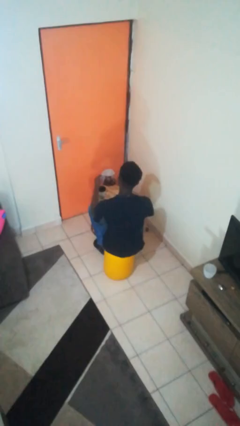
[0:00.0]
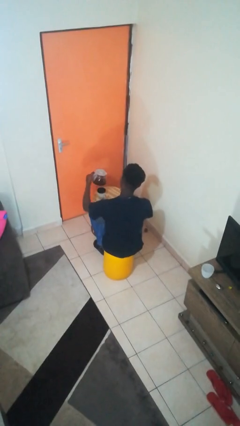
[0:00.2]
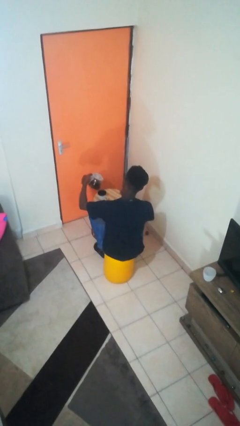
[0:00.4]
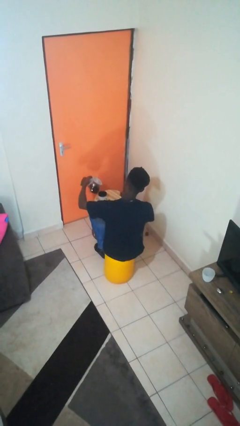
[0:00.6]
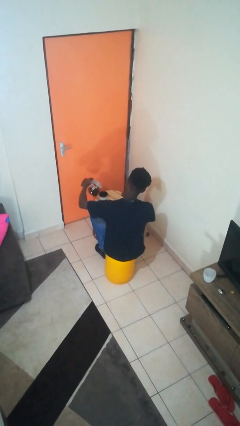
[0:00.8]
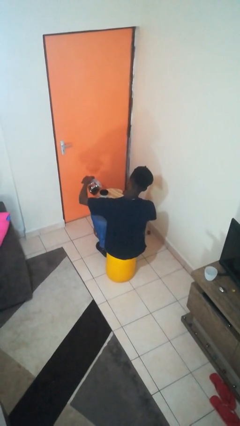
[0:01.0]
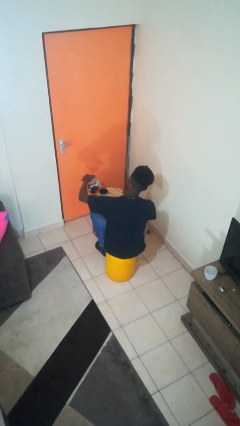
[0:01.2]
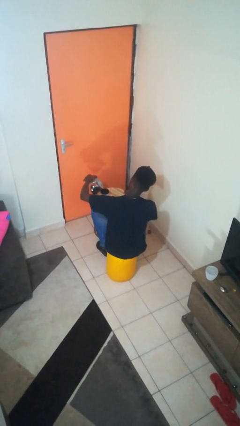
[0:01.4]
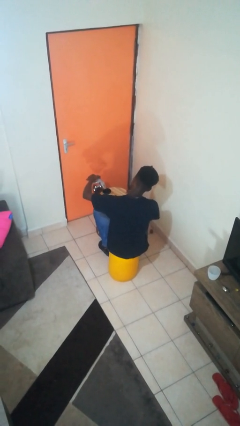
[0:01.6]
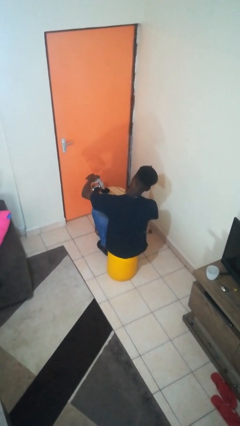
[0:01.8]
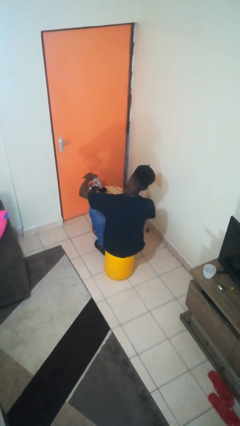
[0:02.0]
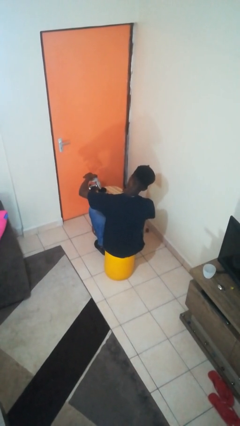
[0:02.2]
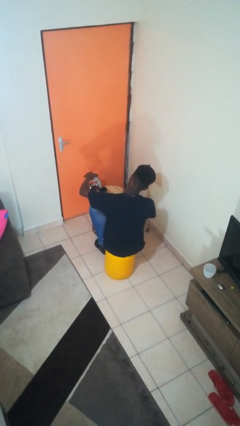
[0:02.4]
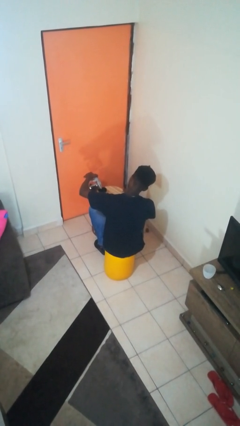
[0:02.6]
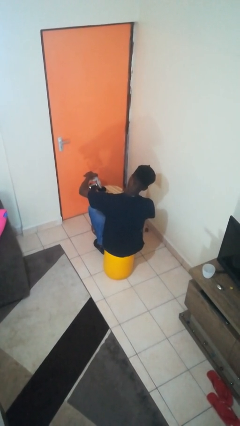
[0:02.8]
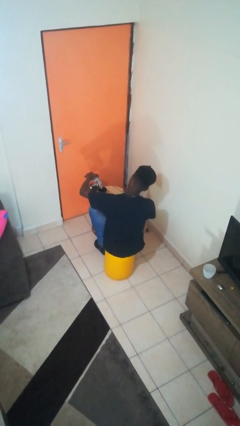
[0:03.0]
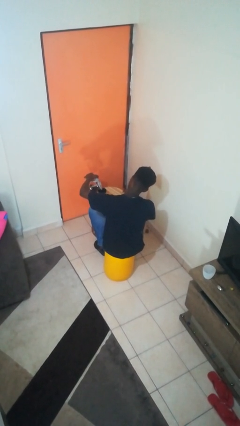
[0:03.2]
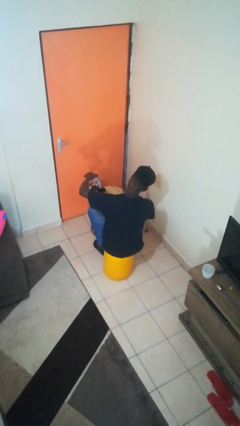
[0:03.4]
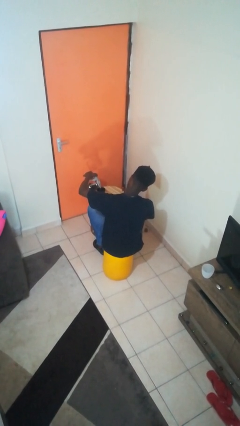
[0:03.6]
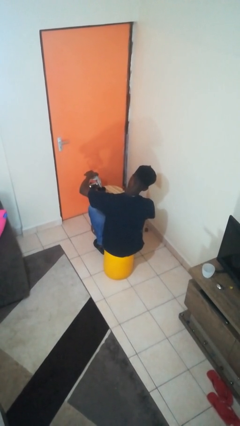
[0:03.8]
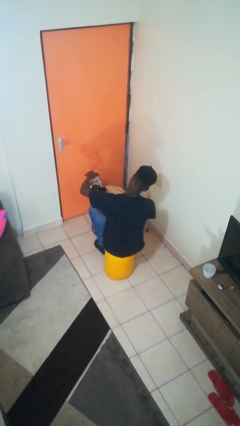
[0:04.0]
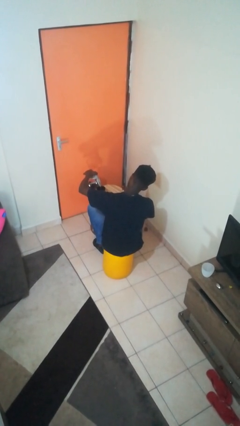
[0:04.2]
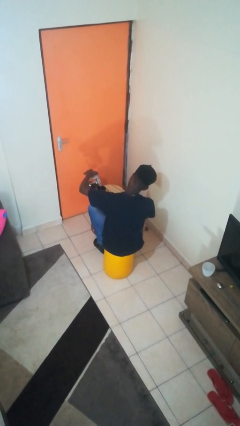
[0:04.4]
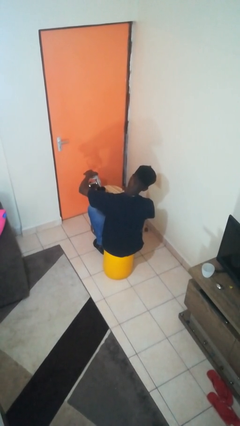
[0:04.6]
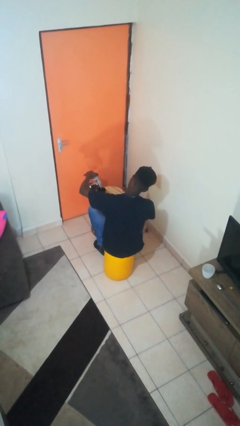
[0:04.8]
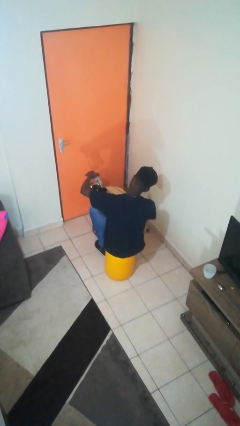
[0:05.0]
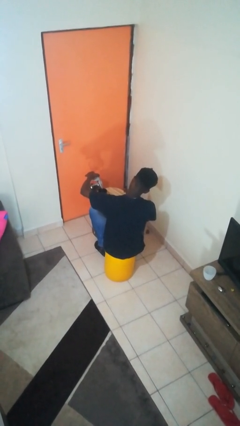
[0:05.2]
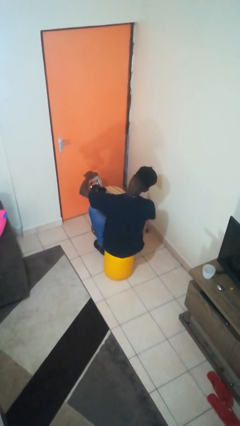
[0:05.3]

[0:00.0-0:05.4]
person pours coffee into mug

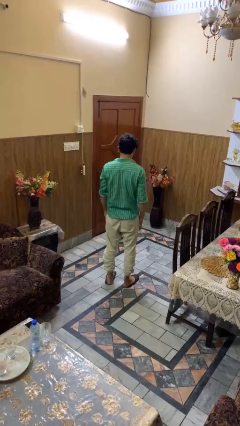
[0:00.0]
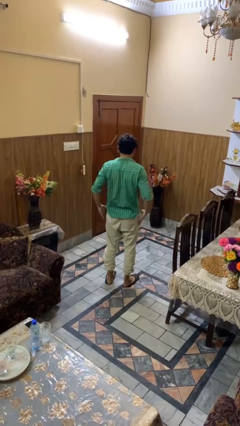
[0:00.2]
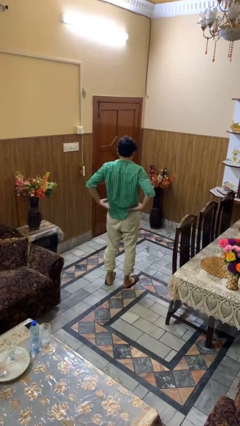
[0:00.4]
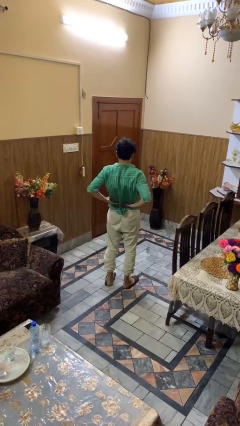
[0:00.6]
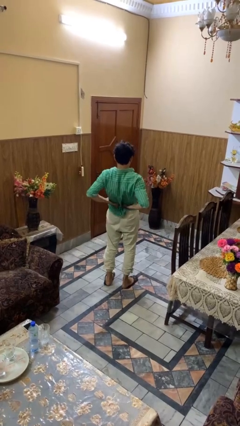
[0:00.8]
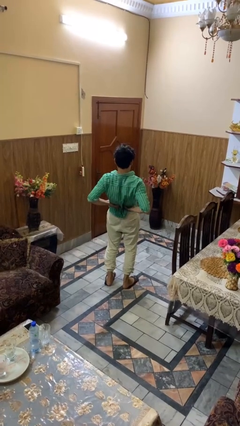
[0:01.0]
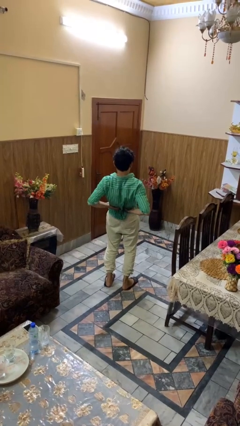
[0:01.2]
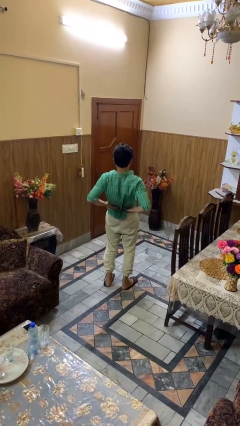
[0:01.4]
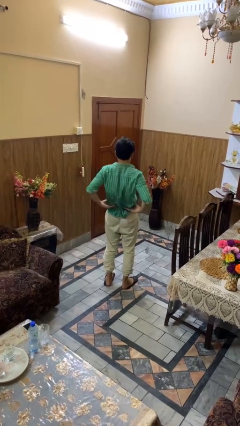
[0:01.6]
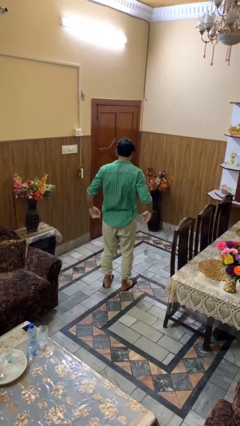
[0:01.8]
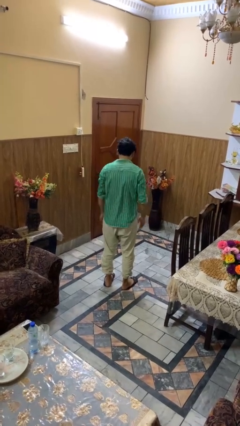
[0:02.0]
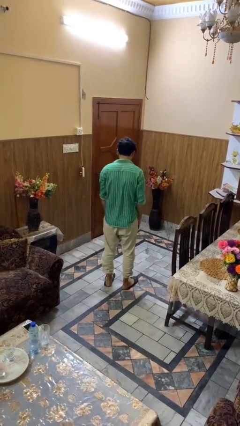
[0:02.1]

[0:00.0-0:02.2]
person stretches back

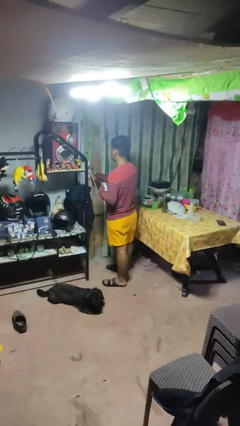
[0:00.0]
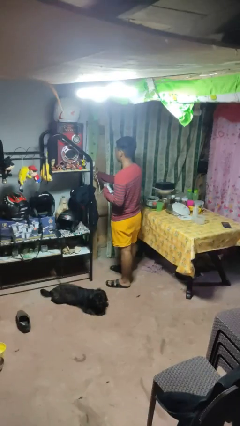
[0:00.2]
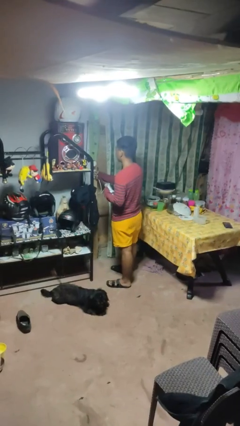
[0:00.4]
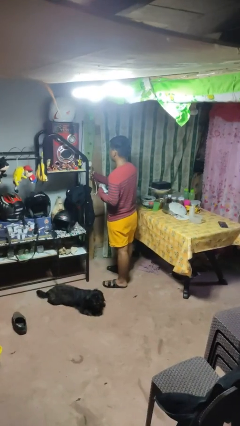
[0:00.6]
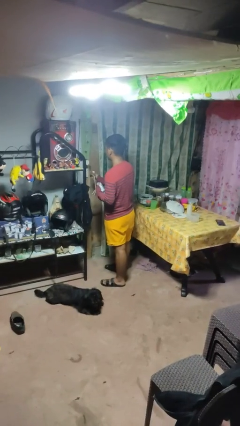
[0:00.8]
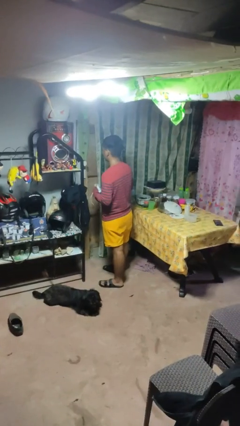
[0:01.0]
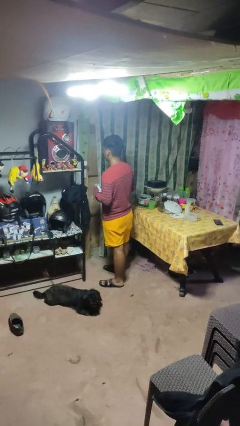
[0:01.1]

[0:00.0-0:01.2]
person unplugs from electrical socket

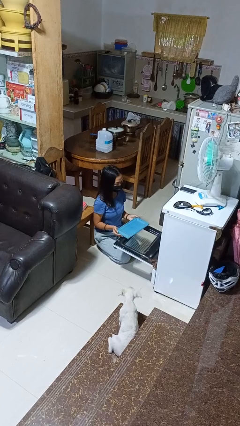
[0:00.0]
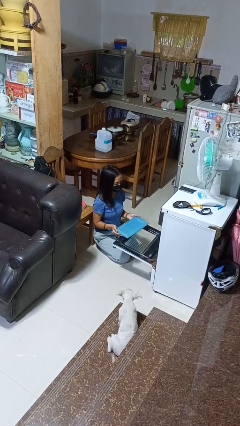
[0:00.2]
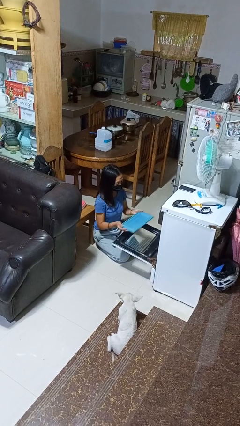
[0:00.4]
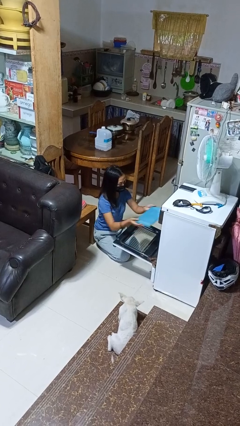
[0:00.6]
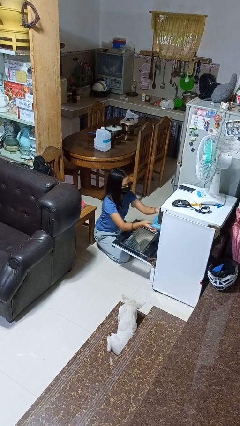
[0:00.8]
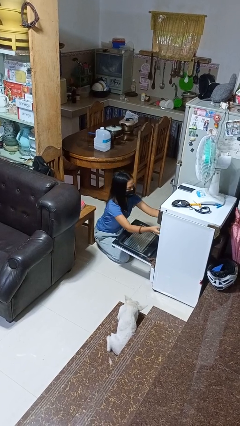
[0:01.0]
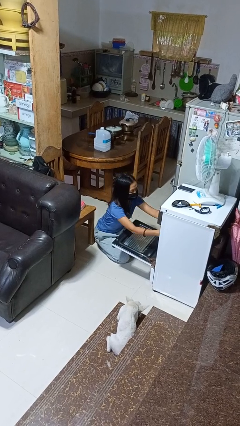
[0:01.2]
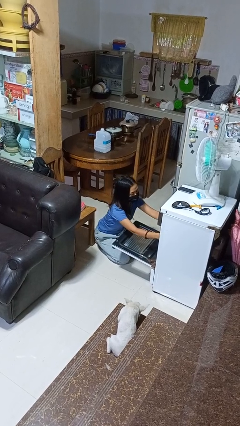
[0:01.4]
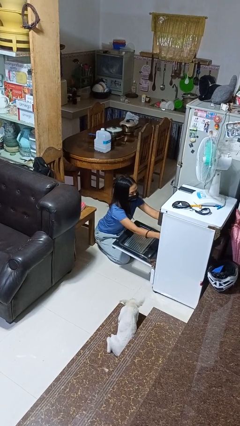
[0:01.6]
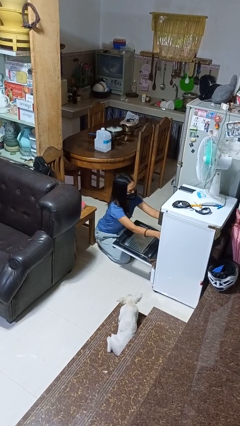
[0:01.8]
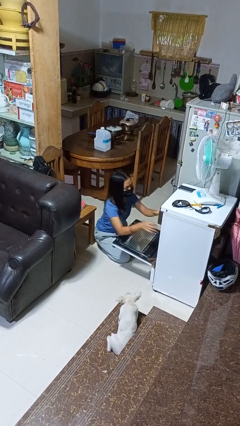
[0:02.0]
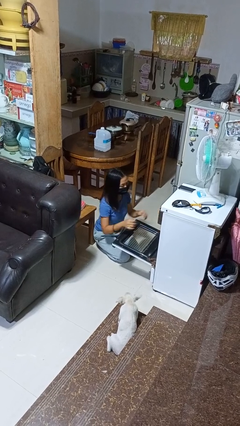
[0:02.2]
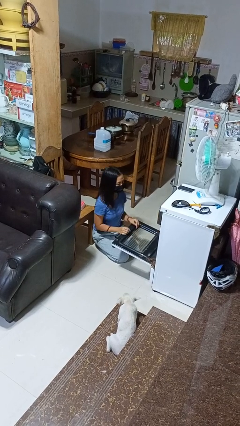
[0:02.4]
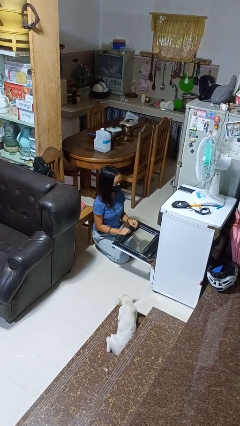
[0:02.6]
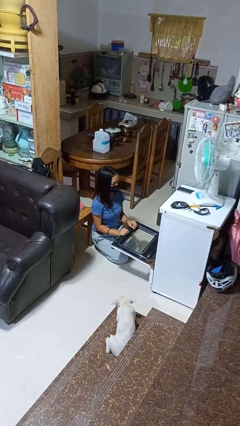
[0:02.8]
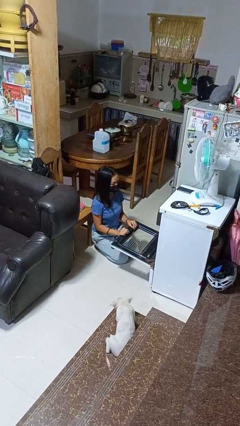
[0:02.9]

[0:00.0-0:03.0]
person puts object into oven

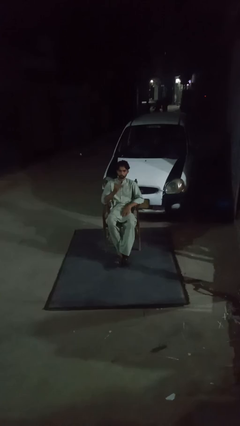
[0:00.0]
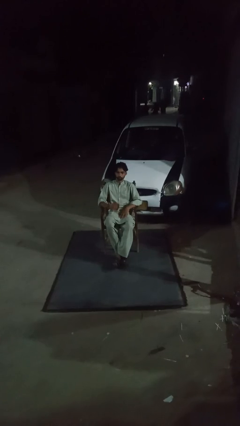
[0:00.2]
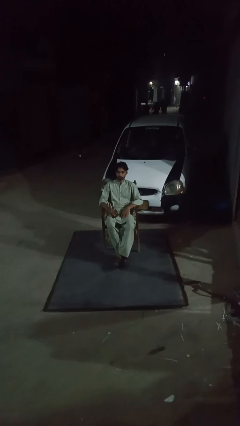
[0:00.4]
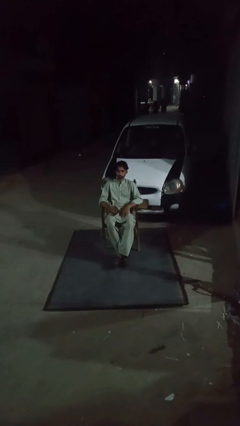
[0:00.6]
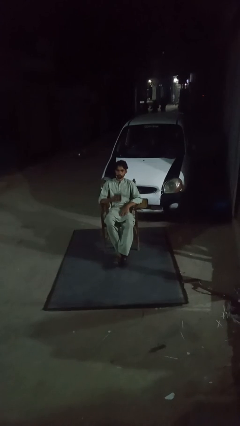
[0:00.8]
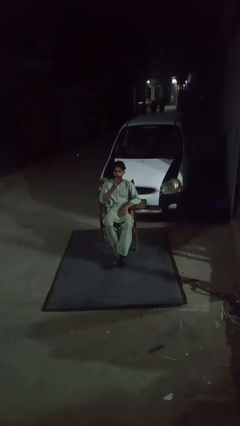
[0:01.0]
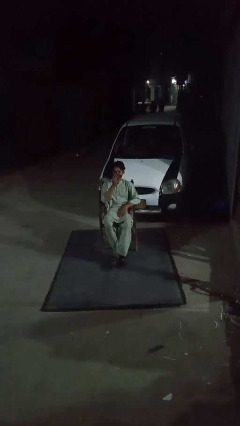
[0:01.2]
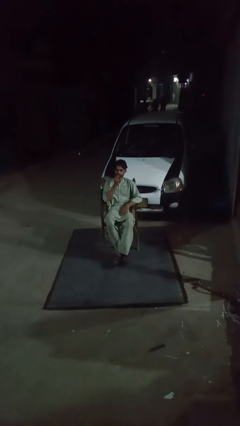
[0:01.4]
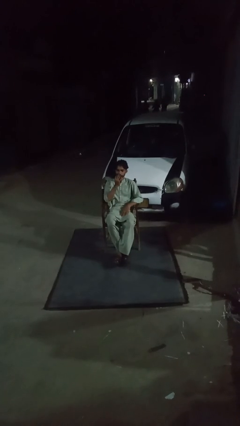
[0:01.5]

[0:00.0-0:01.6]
person wipes mouth with napkin

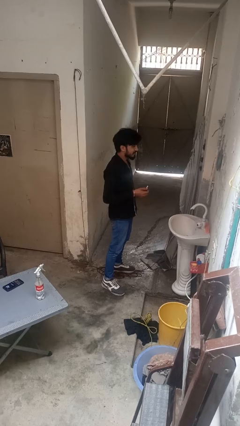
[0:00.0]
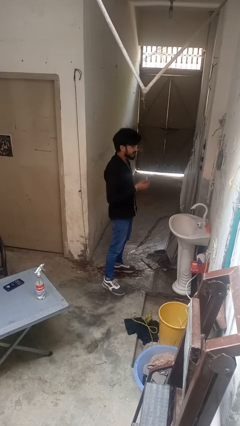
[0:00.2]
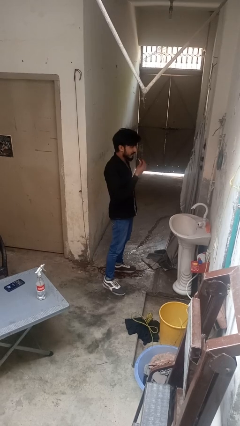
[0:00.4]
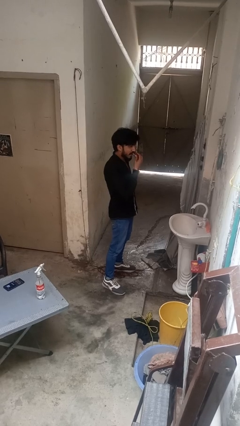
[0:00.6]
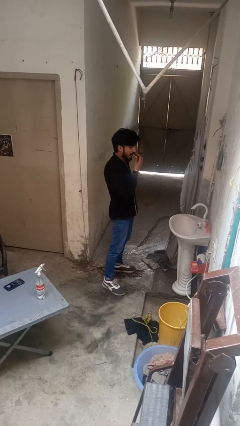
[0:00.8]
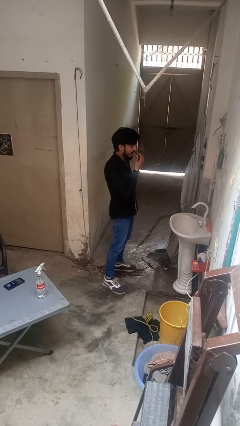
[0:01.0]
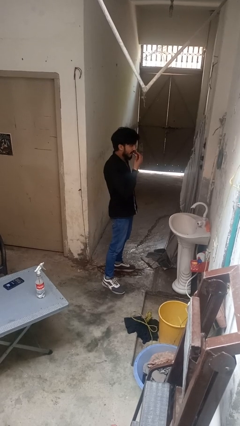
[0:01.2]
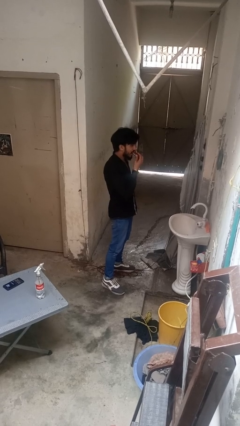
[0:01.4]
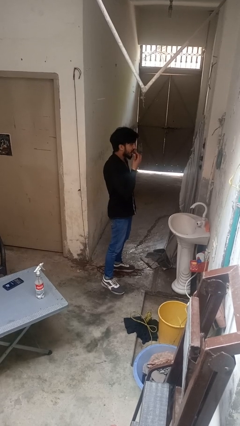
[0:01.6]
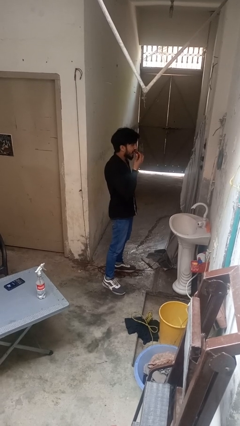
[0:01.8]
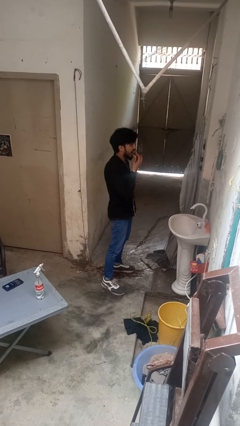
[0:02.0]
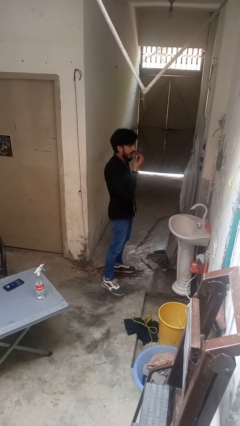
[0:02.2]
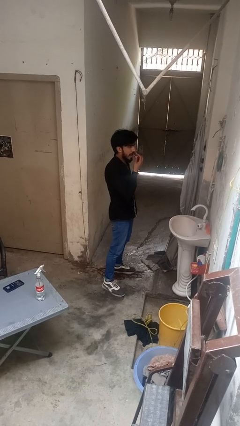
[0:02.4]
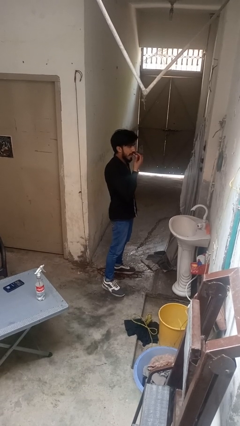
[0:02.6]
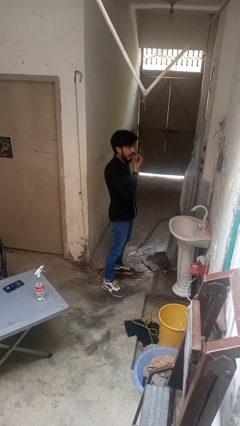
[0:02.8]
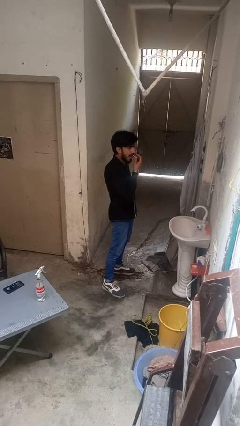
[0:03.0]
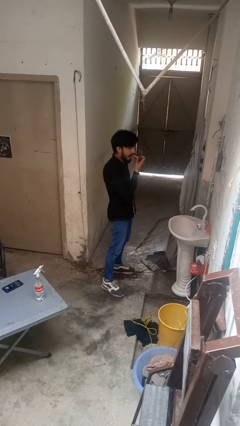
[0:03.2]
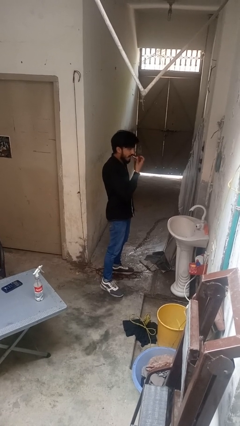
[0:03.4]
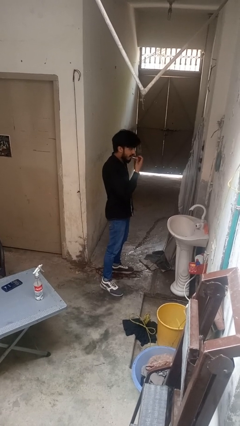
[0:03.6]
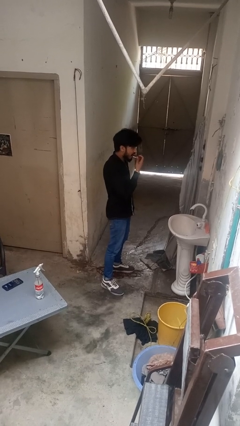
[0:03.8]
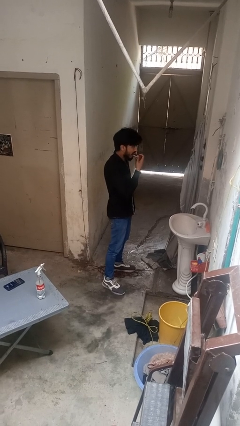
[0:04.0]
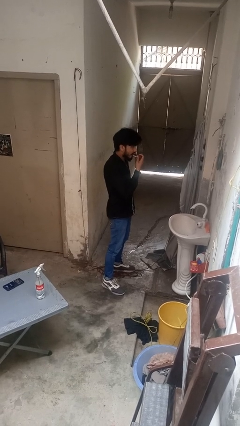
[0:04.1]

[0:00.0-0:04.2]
person applies lip makeup
